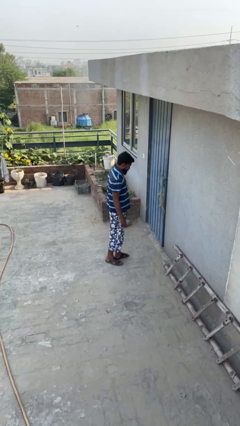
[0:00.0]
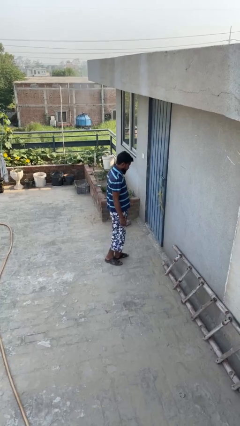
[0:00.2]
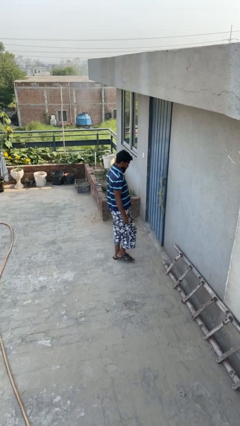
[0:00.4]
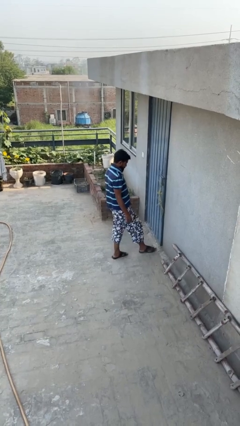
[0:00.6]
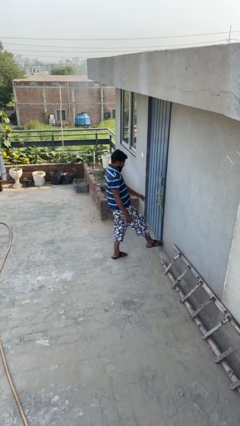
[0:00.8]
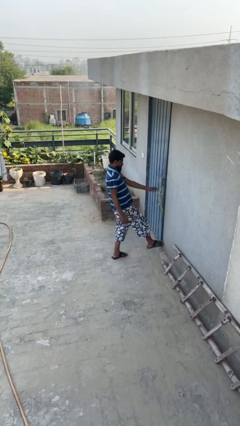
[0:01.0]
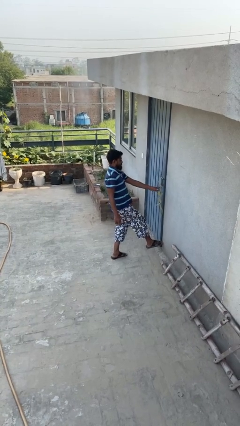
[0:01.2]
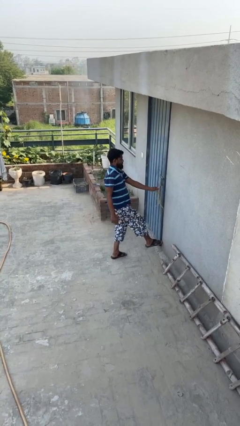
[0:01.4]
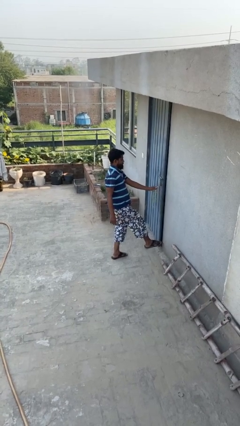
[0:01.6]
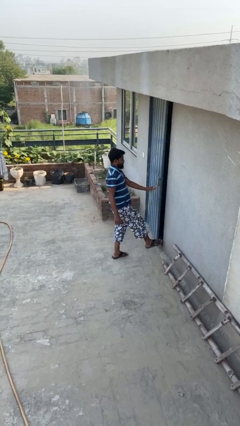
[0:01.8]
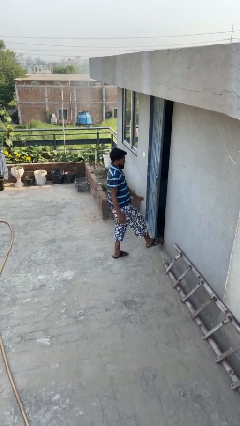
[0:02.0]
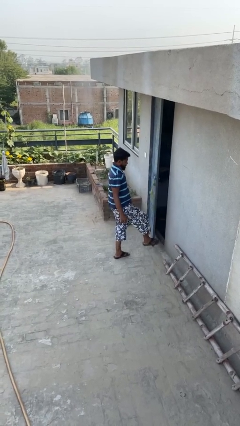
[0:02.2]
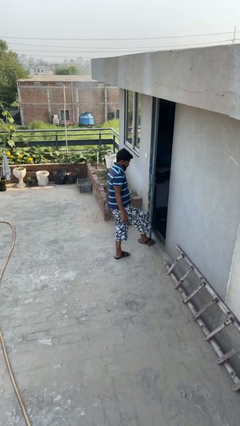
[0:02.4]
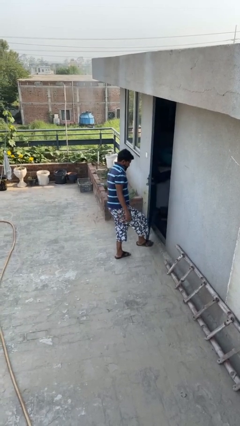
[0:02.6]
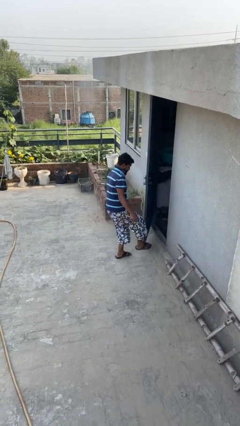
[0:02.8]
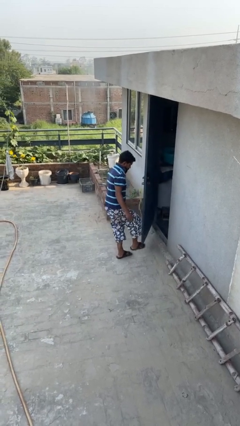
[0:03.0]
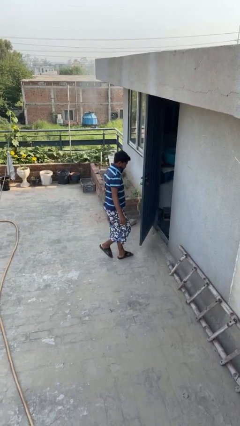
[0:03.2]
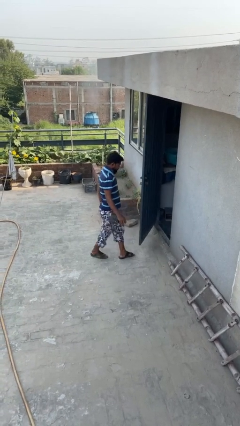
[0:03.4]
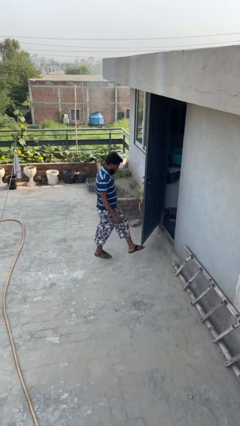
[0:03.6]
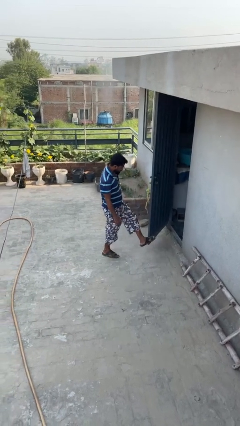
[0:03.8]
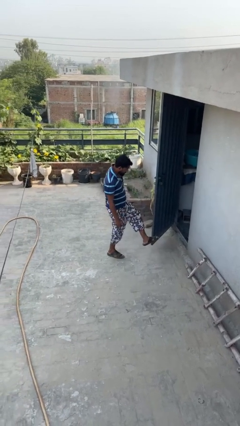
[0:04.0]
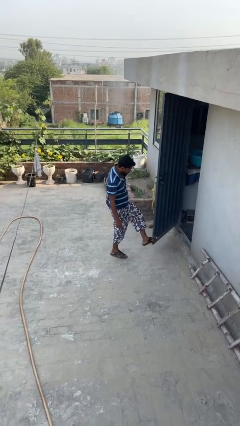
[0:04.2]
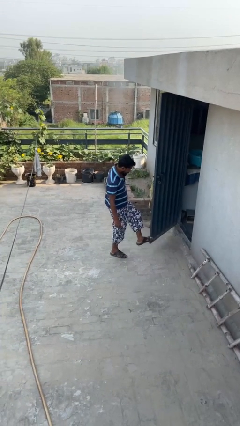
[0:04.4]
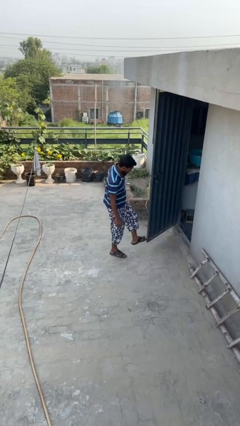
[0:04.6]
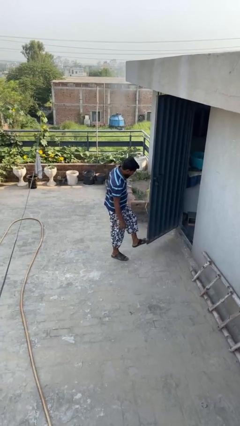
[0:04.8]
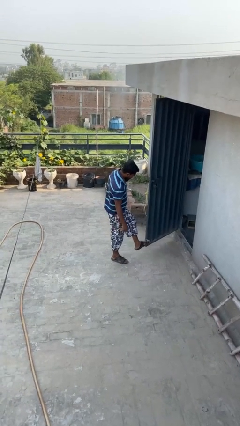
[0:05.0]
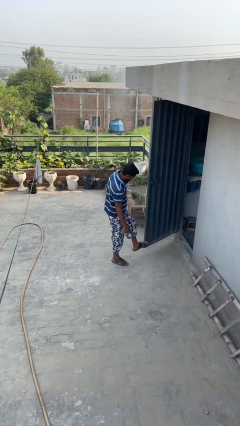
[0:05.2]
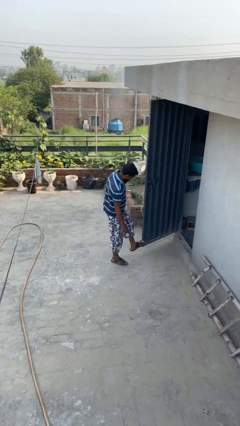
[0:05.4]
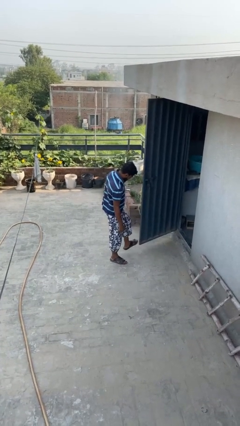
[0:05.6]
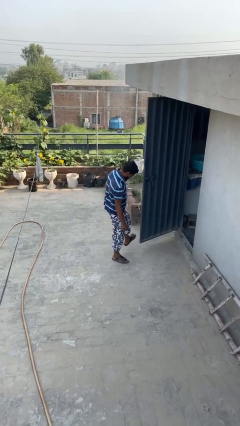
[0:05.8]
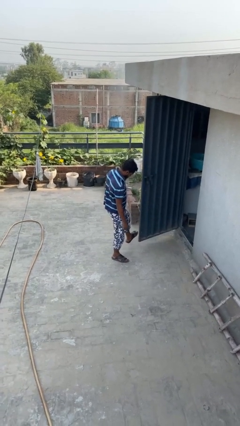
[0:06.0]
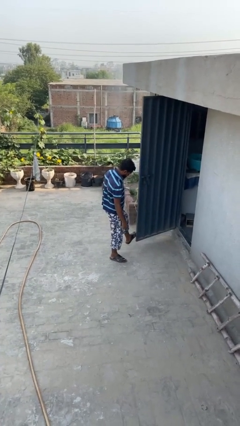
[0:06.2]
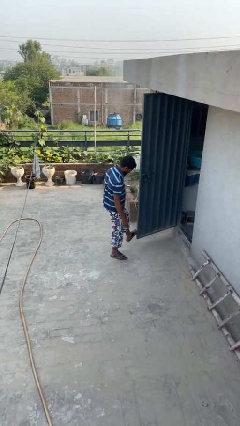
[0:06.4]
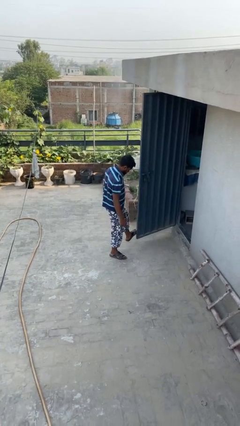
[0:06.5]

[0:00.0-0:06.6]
person opens facility door

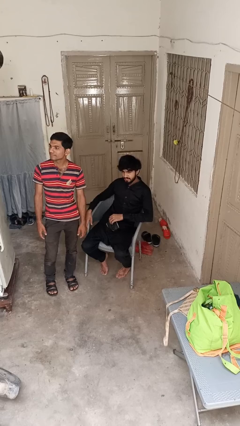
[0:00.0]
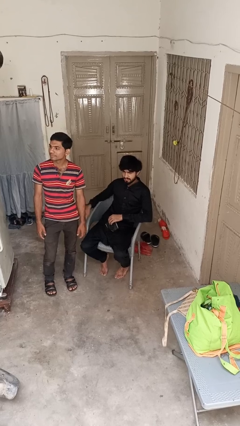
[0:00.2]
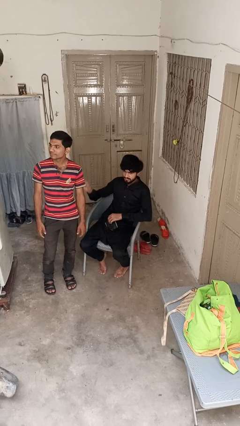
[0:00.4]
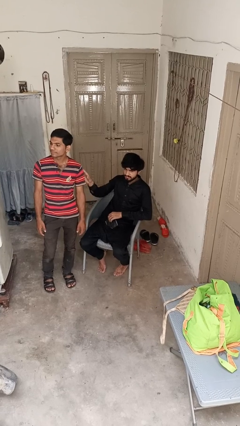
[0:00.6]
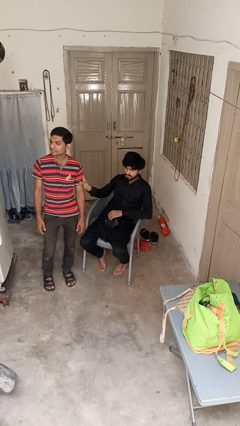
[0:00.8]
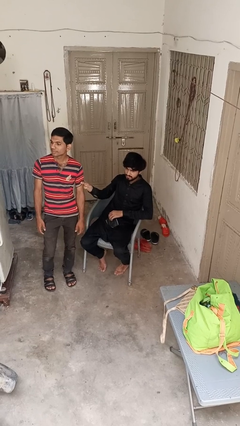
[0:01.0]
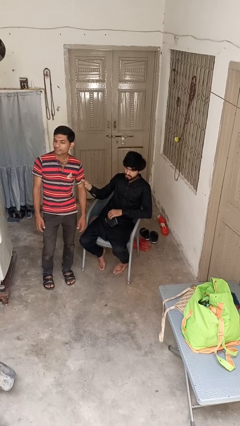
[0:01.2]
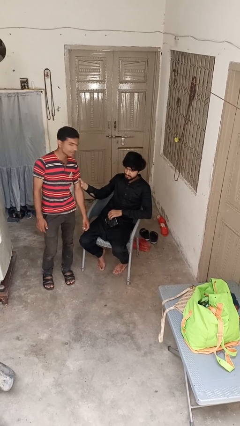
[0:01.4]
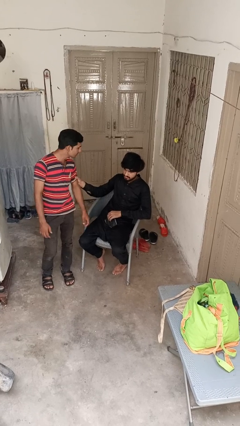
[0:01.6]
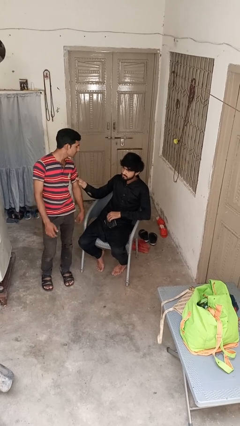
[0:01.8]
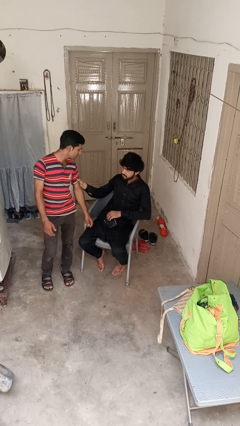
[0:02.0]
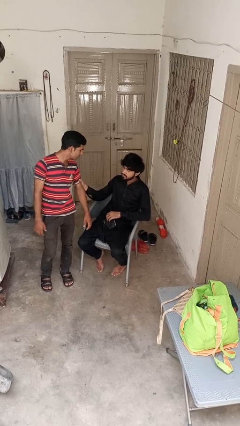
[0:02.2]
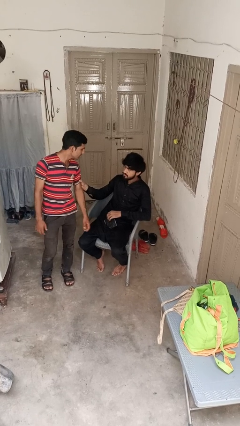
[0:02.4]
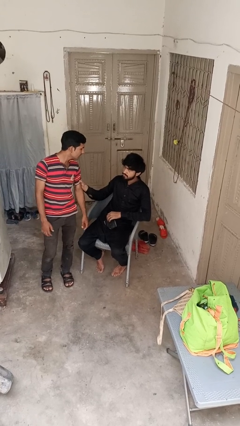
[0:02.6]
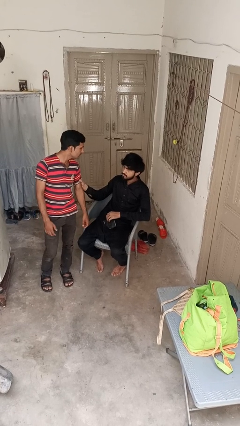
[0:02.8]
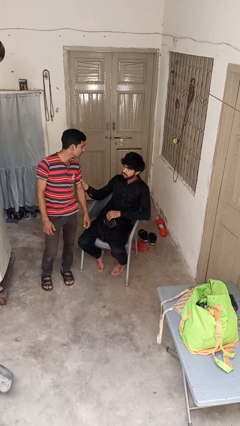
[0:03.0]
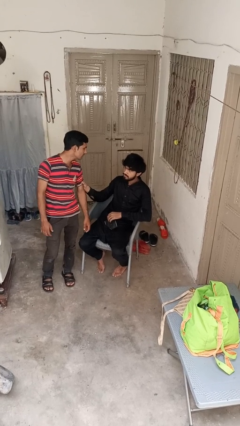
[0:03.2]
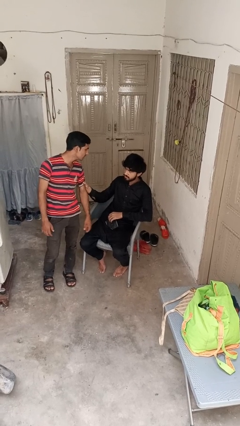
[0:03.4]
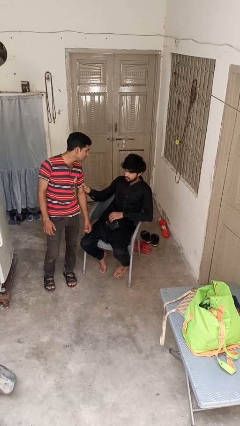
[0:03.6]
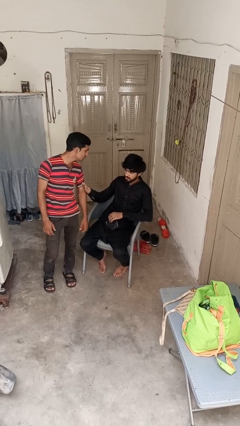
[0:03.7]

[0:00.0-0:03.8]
person grabs person by bicep

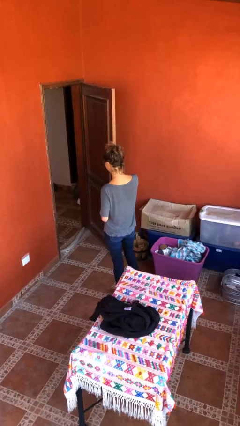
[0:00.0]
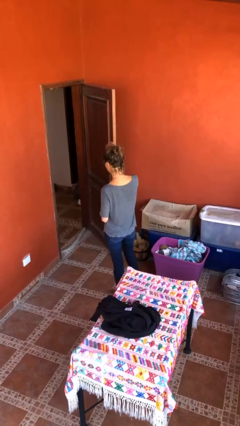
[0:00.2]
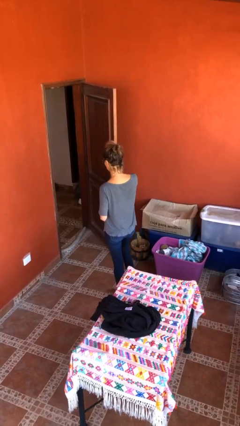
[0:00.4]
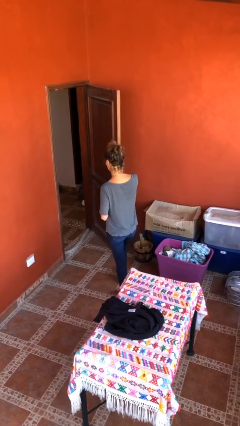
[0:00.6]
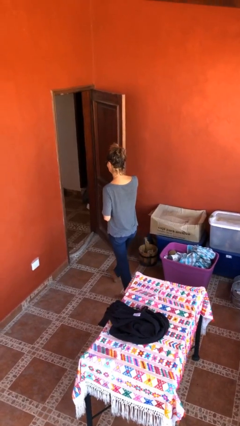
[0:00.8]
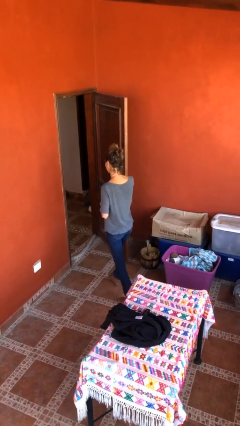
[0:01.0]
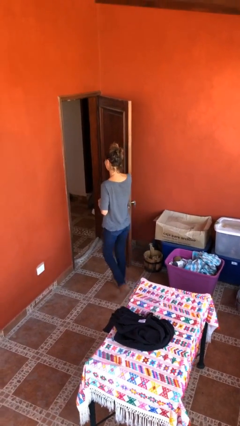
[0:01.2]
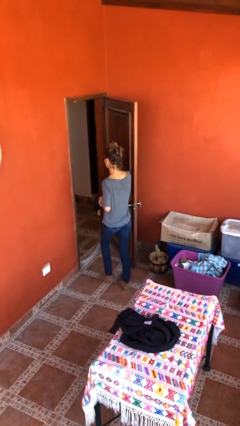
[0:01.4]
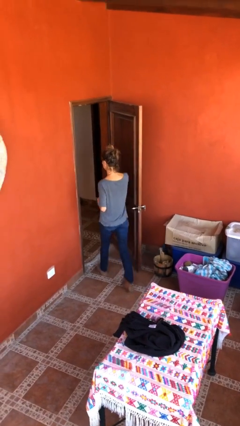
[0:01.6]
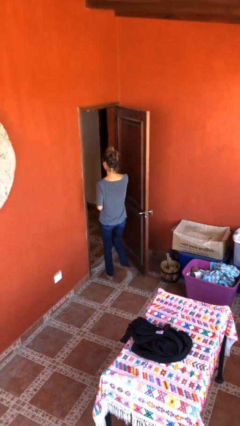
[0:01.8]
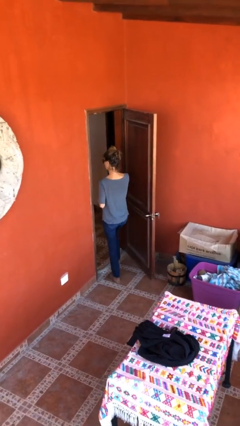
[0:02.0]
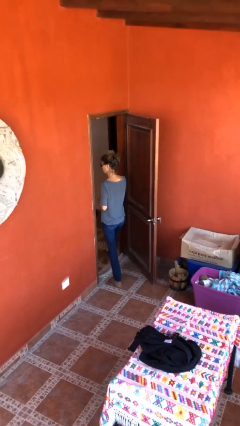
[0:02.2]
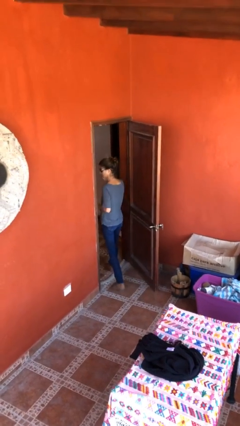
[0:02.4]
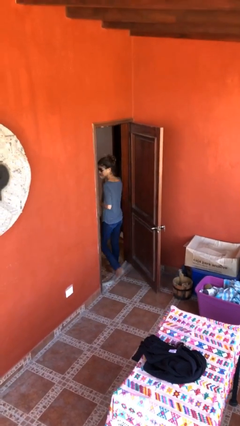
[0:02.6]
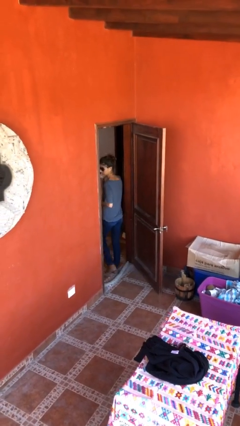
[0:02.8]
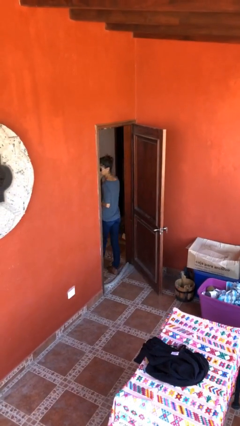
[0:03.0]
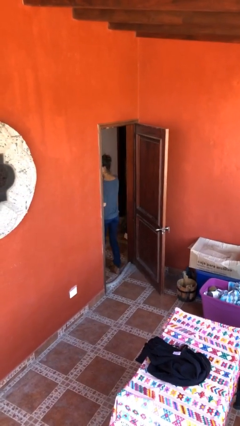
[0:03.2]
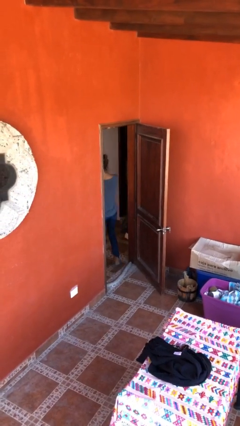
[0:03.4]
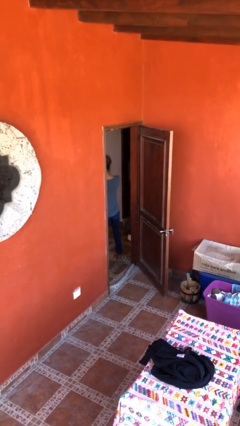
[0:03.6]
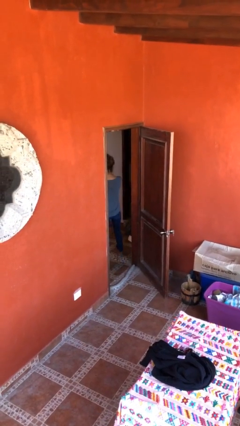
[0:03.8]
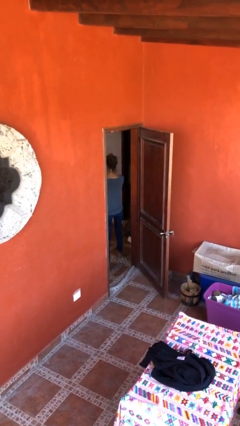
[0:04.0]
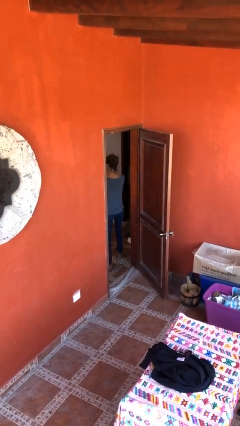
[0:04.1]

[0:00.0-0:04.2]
person exits scene through structure

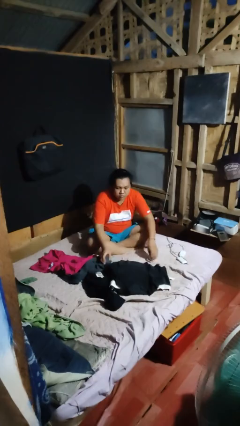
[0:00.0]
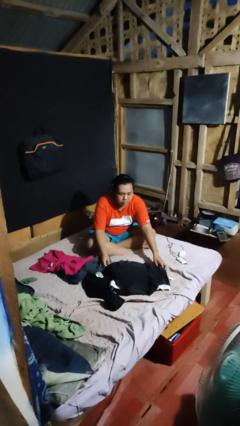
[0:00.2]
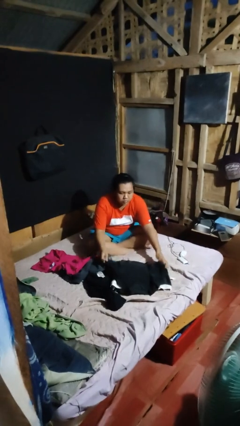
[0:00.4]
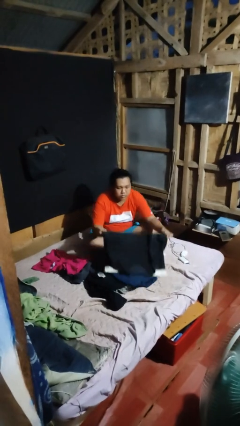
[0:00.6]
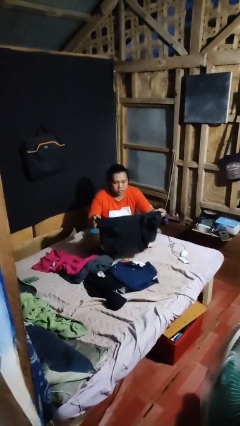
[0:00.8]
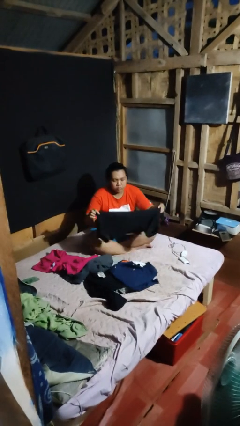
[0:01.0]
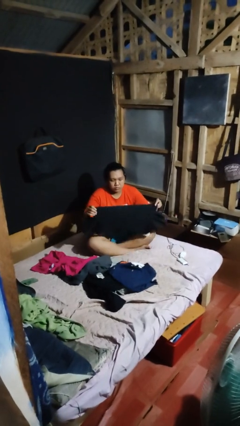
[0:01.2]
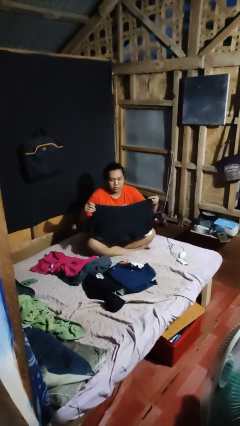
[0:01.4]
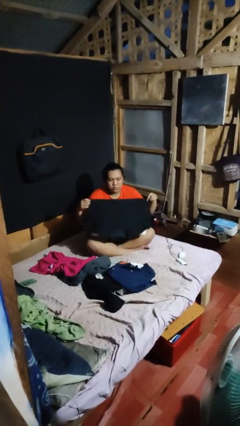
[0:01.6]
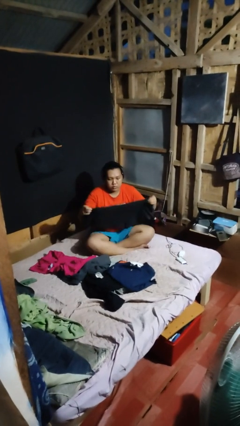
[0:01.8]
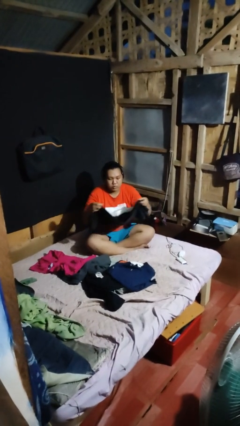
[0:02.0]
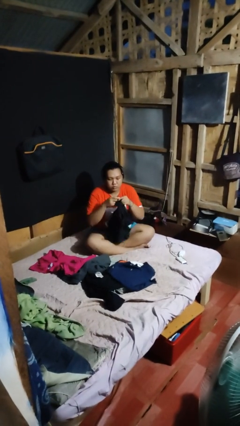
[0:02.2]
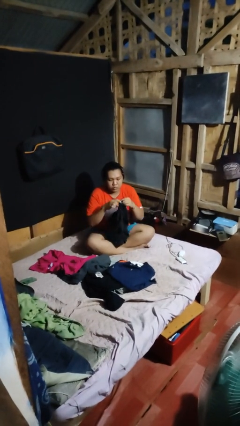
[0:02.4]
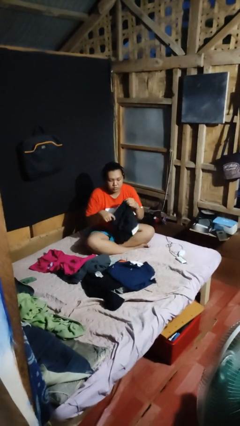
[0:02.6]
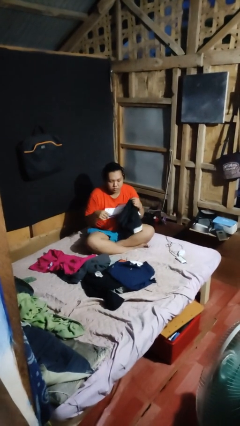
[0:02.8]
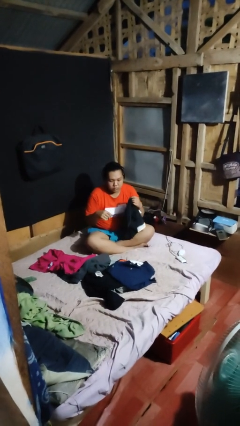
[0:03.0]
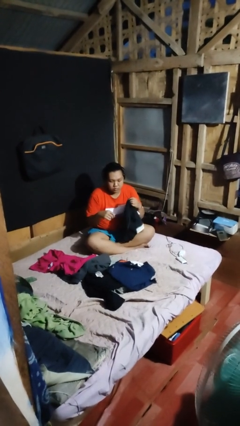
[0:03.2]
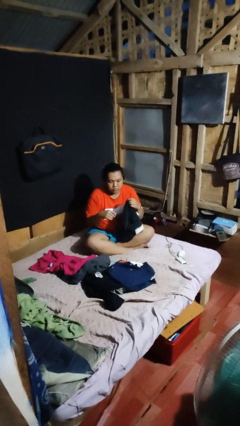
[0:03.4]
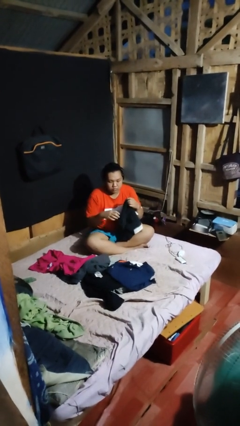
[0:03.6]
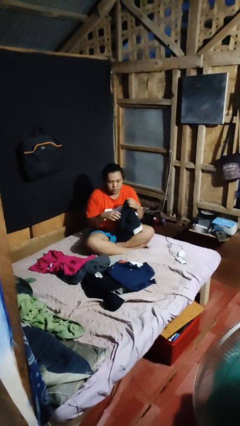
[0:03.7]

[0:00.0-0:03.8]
person folds shirt
